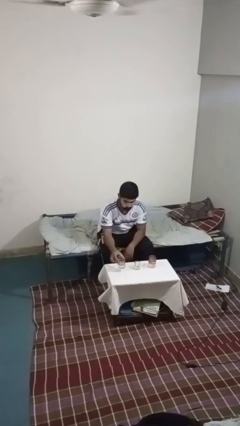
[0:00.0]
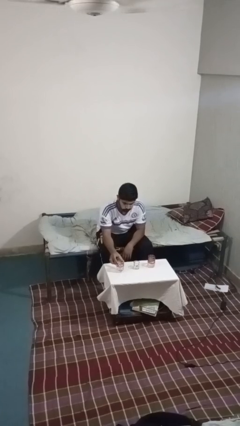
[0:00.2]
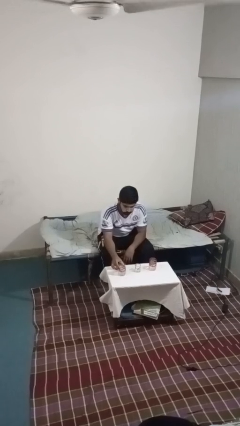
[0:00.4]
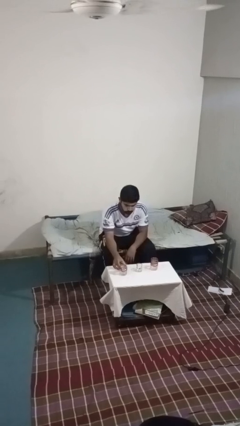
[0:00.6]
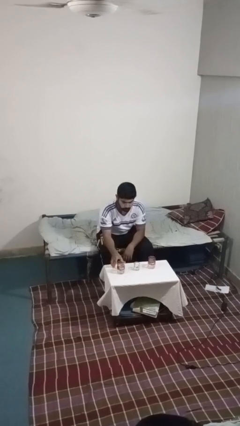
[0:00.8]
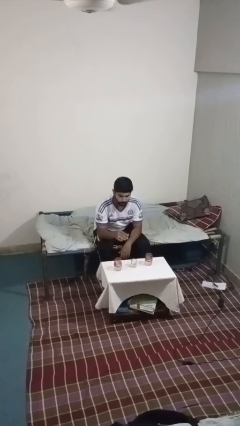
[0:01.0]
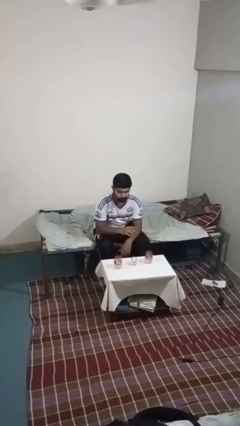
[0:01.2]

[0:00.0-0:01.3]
person puts down object on table

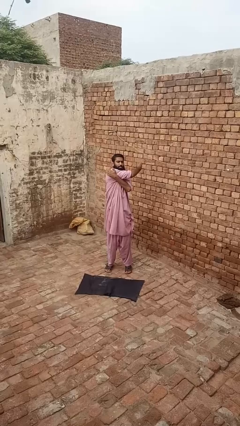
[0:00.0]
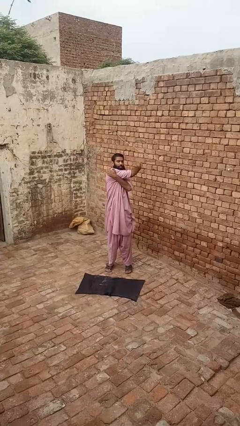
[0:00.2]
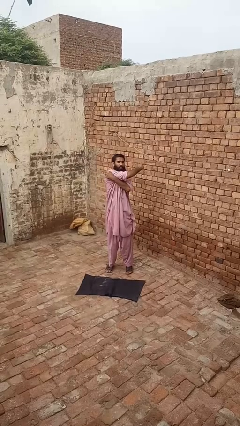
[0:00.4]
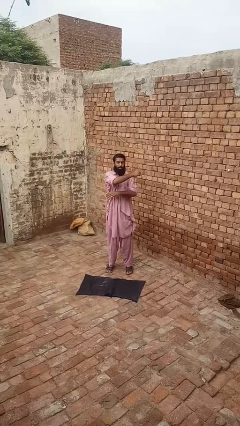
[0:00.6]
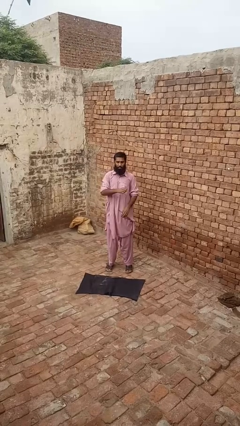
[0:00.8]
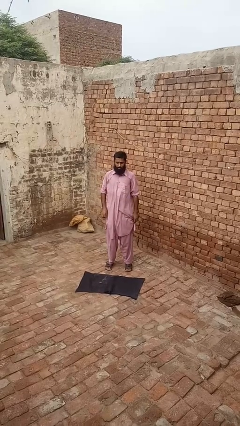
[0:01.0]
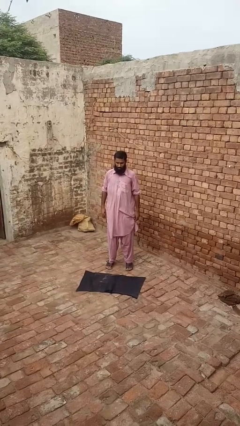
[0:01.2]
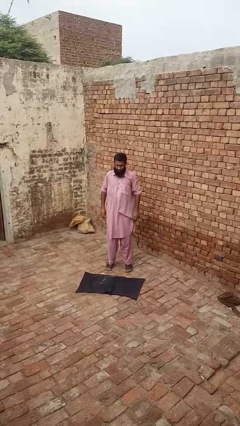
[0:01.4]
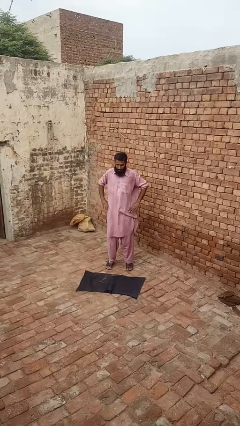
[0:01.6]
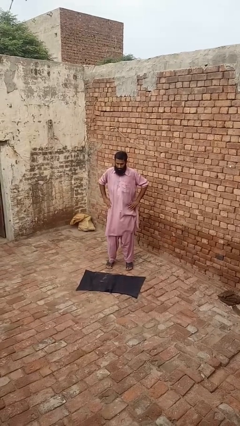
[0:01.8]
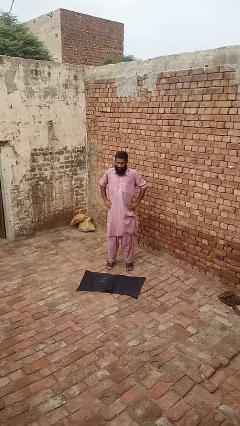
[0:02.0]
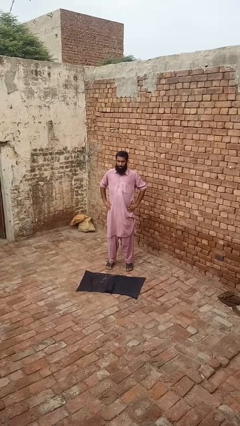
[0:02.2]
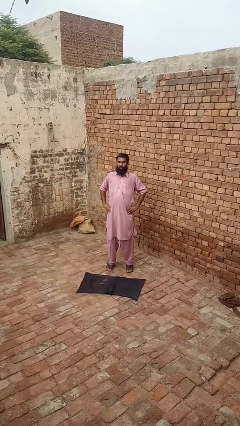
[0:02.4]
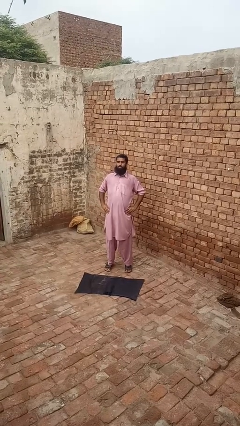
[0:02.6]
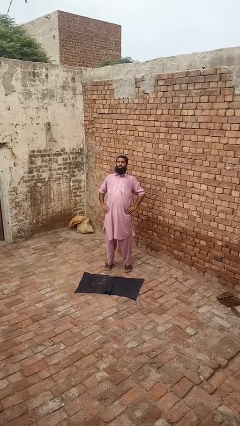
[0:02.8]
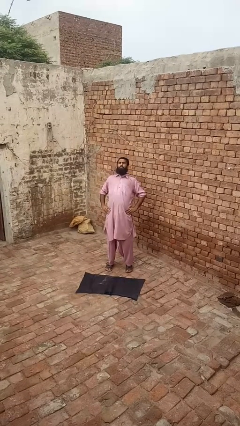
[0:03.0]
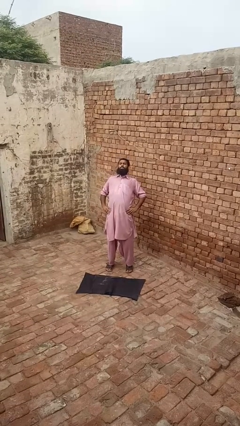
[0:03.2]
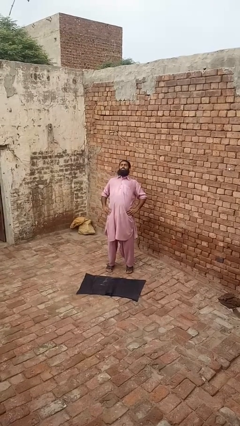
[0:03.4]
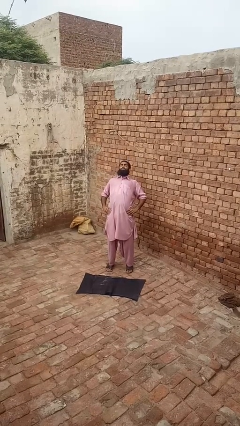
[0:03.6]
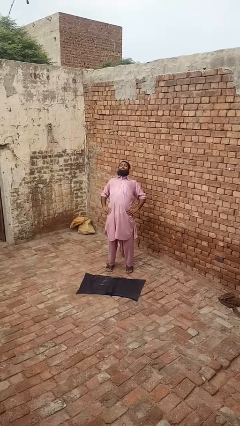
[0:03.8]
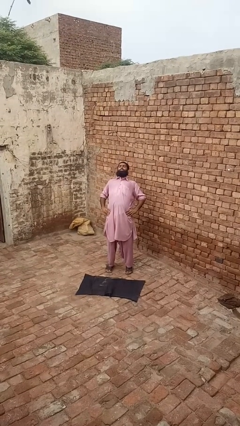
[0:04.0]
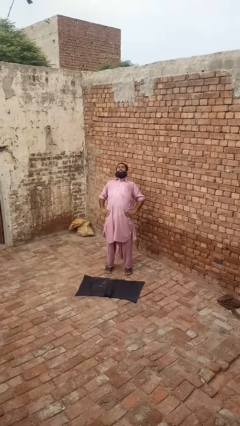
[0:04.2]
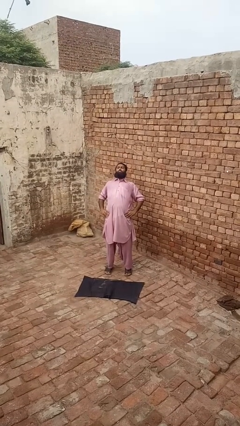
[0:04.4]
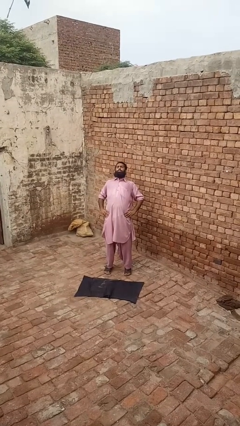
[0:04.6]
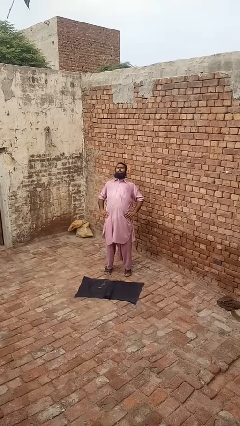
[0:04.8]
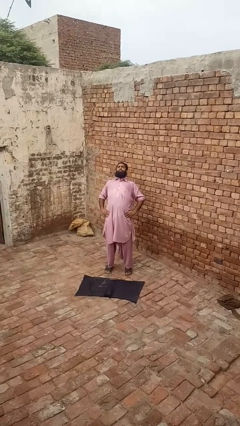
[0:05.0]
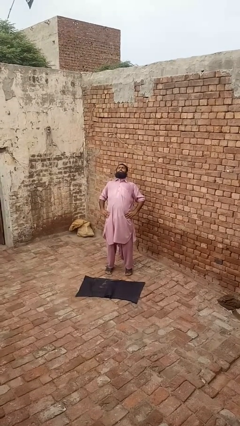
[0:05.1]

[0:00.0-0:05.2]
person stretches back

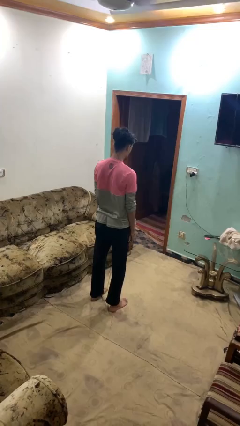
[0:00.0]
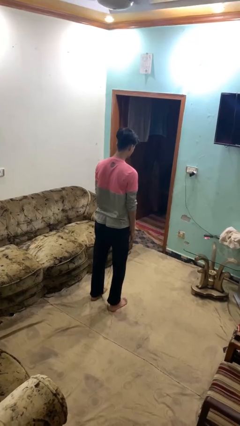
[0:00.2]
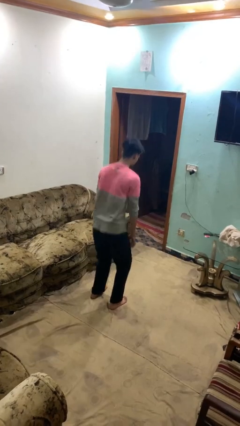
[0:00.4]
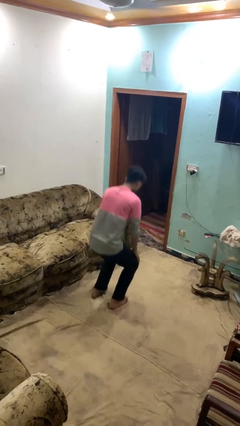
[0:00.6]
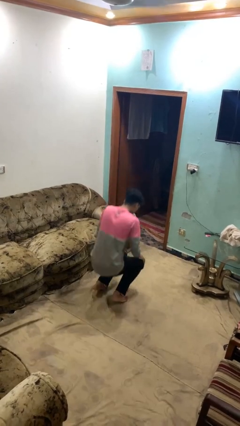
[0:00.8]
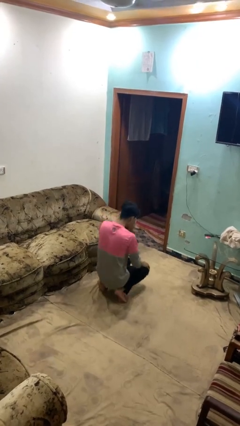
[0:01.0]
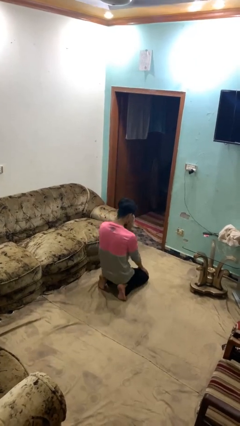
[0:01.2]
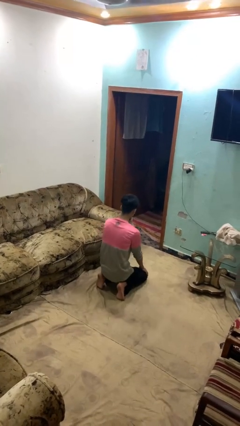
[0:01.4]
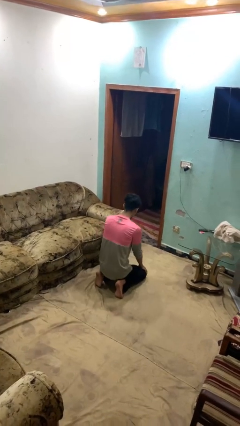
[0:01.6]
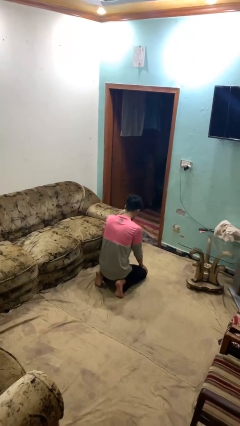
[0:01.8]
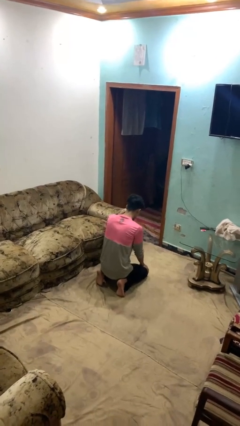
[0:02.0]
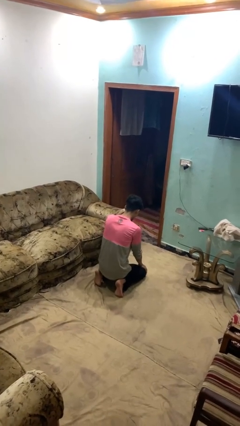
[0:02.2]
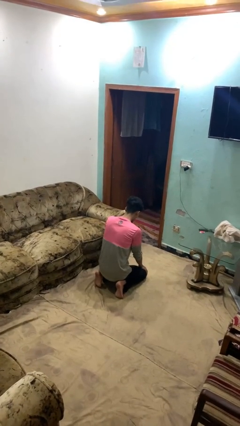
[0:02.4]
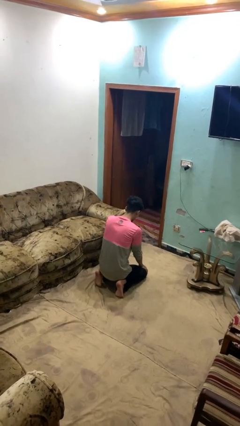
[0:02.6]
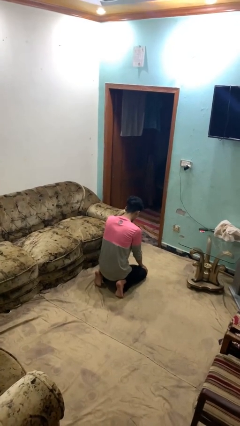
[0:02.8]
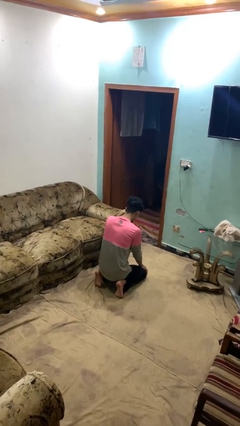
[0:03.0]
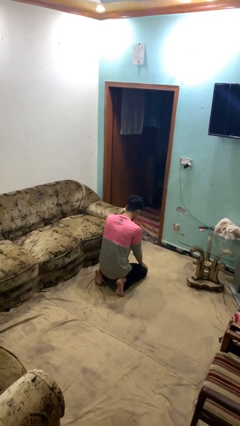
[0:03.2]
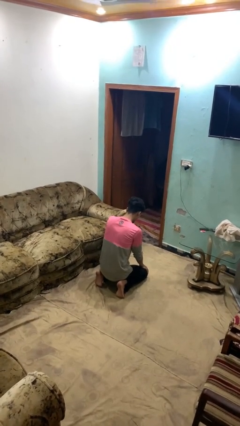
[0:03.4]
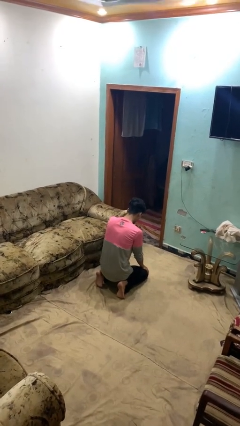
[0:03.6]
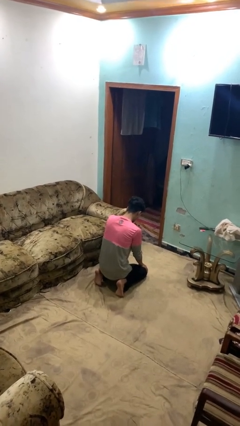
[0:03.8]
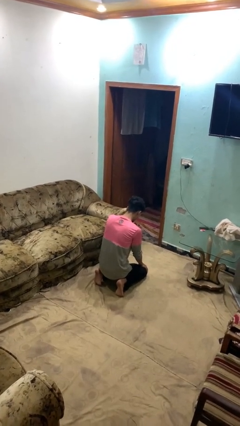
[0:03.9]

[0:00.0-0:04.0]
person kneels

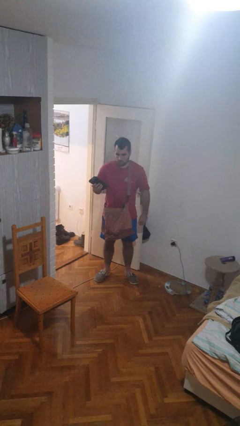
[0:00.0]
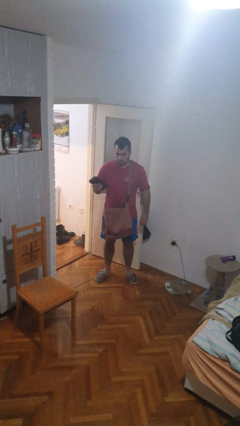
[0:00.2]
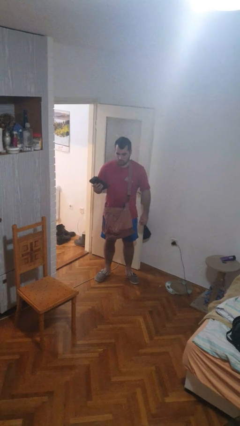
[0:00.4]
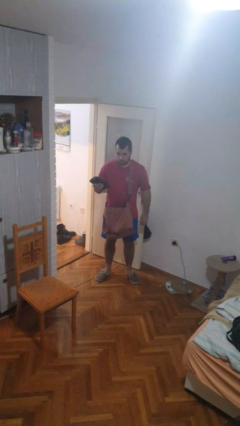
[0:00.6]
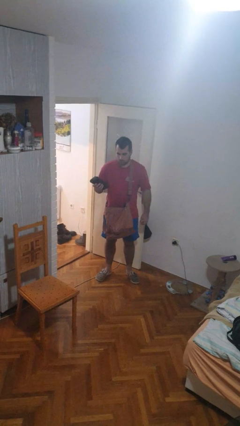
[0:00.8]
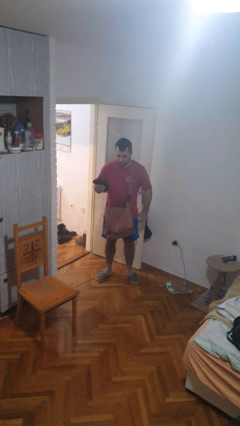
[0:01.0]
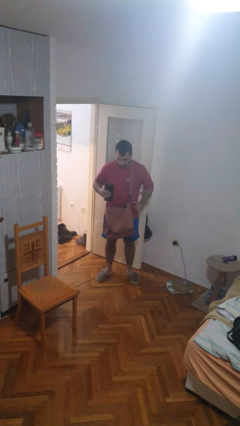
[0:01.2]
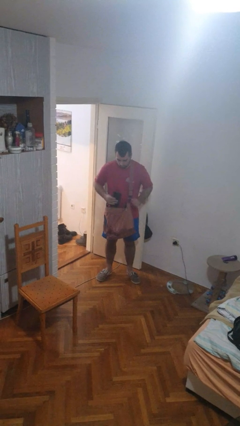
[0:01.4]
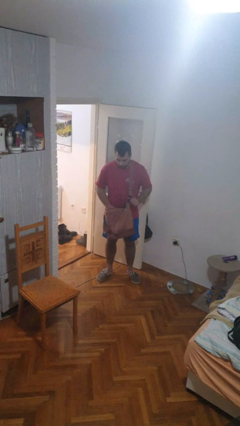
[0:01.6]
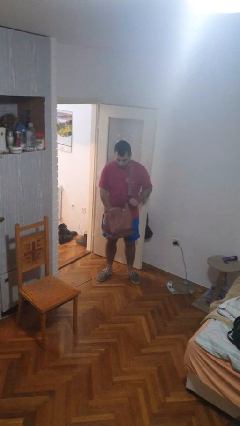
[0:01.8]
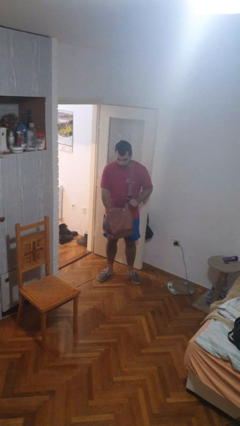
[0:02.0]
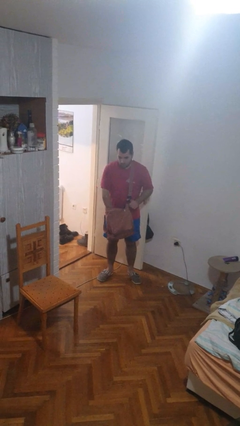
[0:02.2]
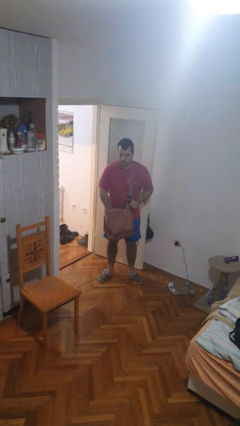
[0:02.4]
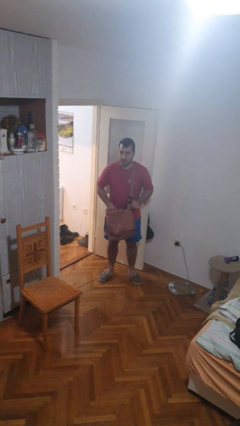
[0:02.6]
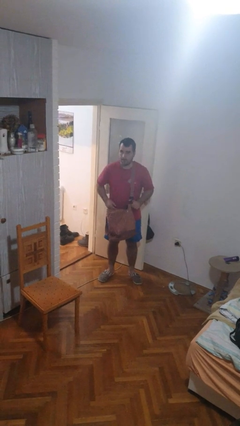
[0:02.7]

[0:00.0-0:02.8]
person puts object into purse

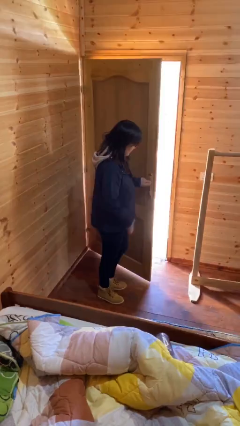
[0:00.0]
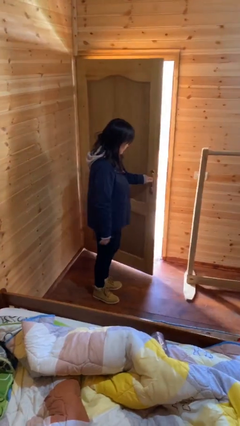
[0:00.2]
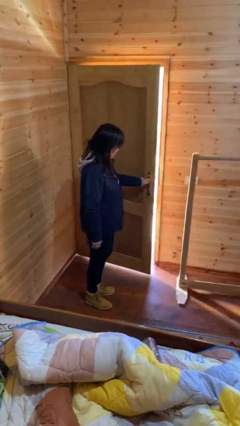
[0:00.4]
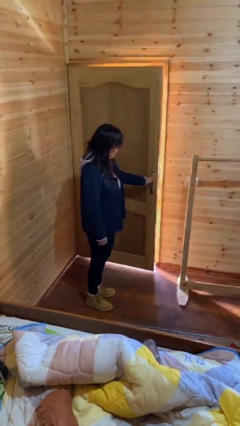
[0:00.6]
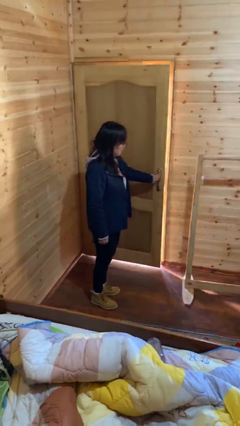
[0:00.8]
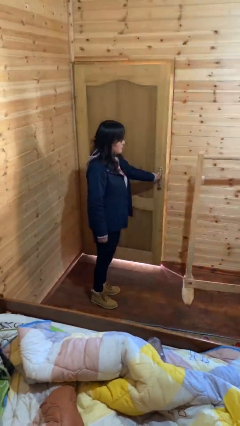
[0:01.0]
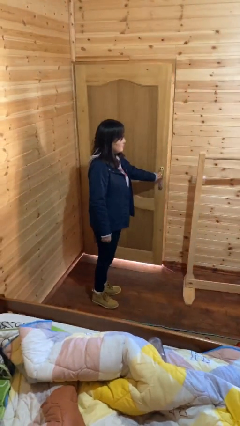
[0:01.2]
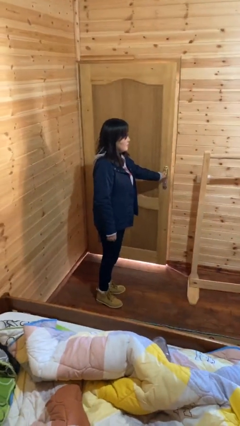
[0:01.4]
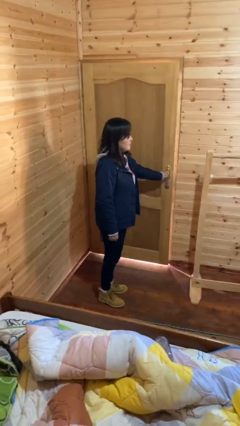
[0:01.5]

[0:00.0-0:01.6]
person closes facility door

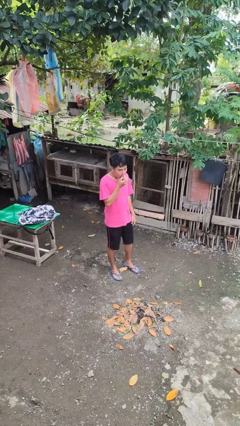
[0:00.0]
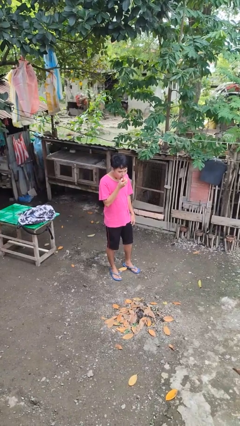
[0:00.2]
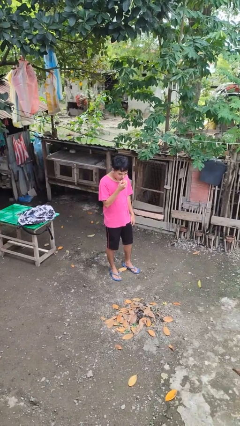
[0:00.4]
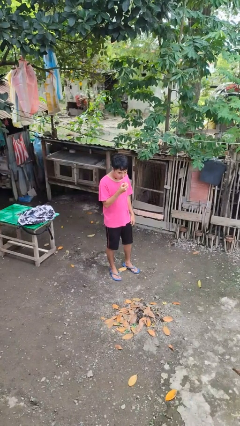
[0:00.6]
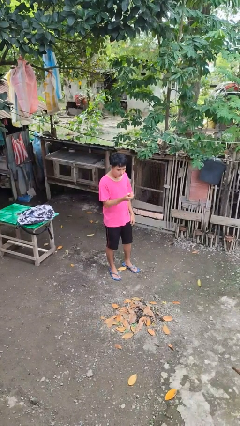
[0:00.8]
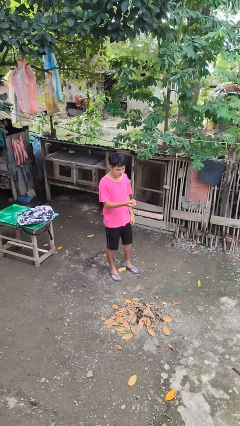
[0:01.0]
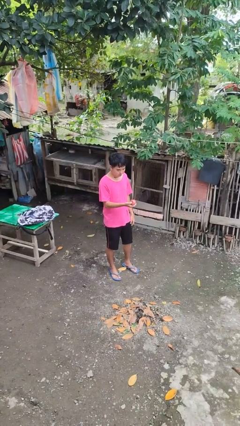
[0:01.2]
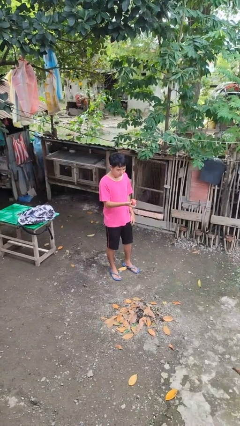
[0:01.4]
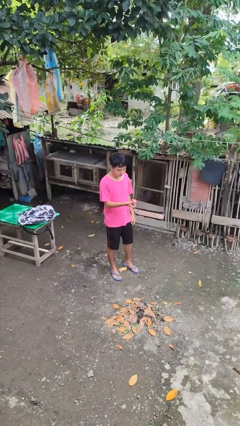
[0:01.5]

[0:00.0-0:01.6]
person eats apple

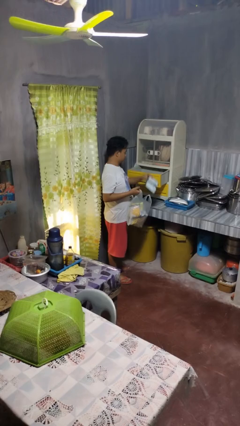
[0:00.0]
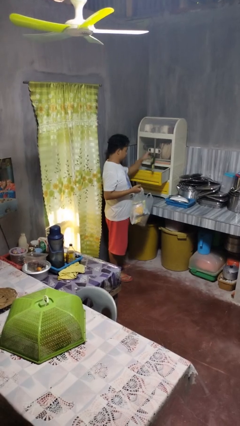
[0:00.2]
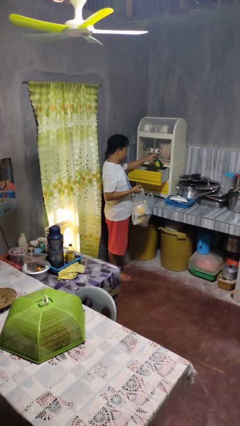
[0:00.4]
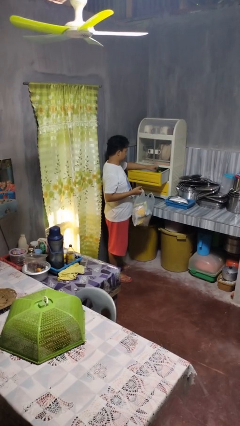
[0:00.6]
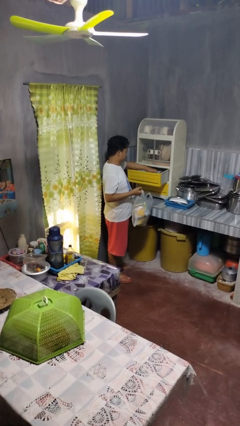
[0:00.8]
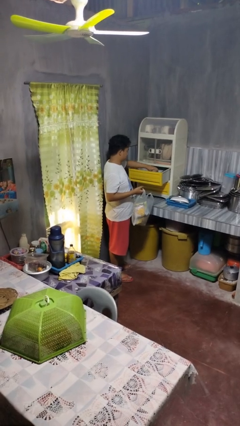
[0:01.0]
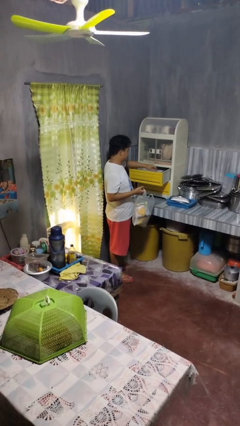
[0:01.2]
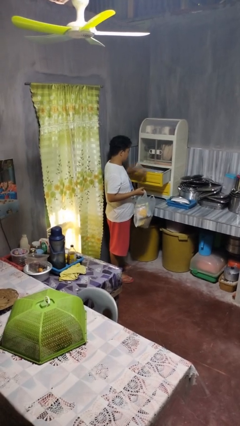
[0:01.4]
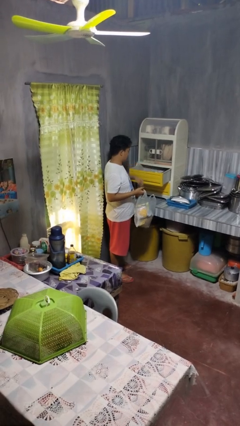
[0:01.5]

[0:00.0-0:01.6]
person loads groceries into cabinet
